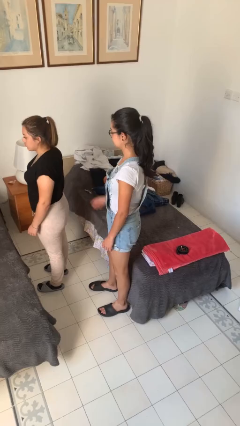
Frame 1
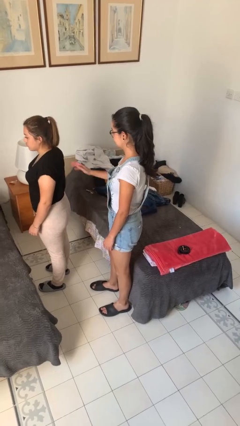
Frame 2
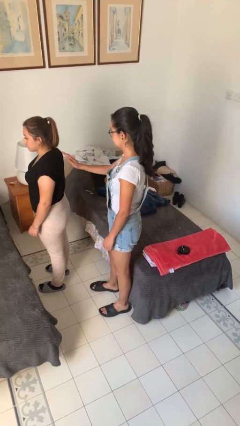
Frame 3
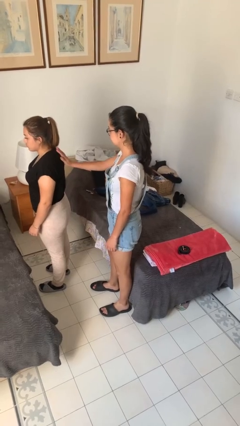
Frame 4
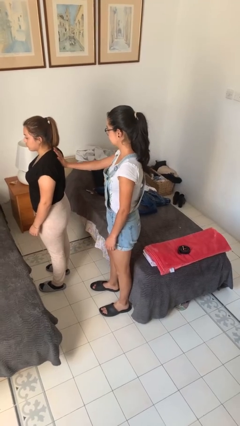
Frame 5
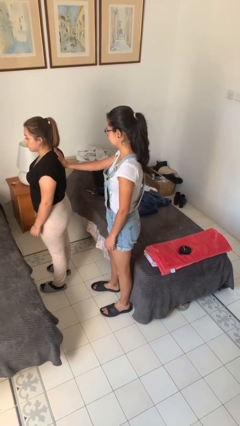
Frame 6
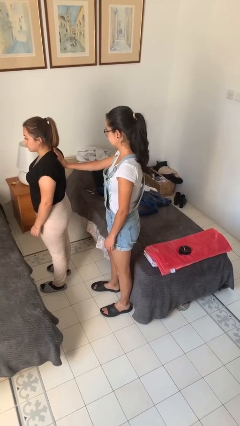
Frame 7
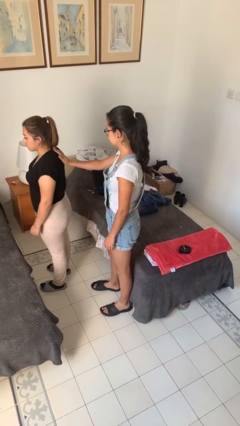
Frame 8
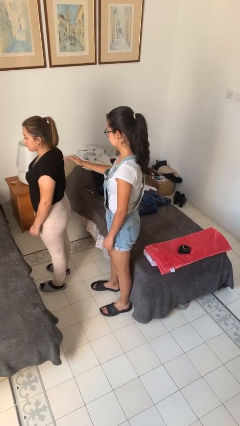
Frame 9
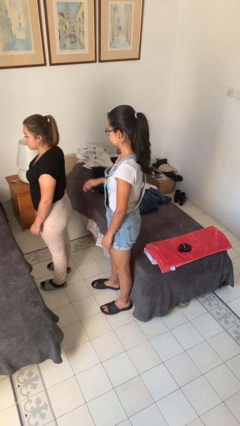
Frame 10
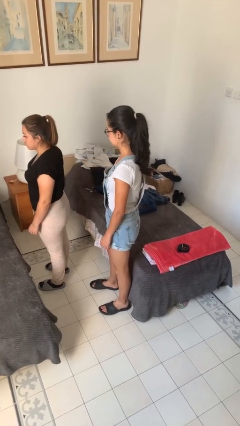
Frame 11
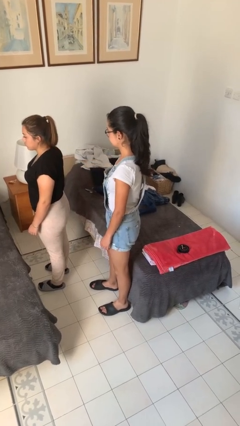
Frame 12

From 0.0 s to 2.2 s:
person touches back of person

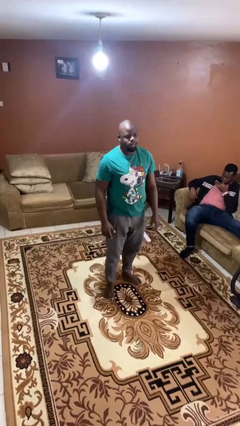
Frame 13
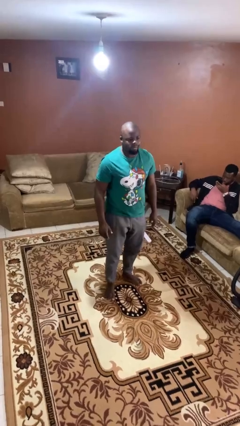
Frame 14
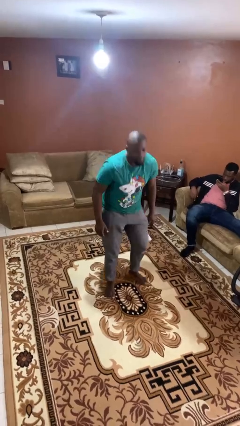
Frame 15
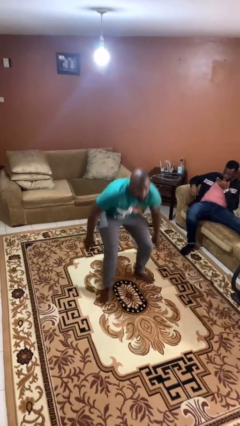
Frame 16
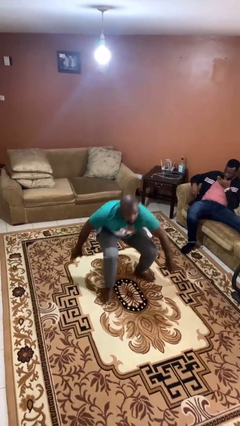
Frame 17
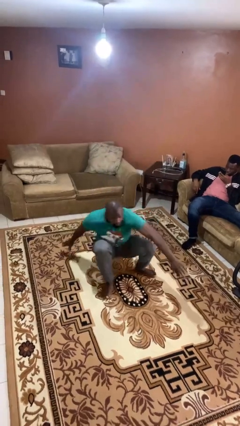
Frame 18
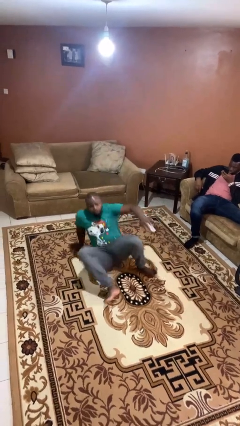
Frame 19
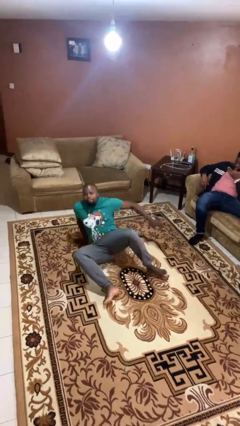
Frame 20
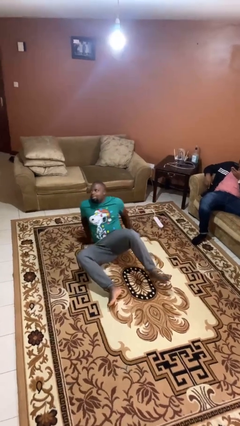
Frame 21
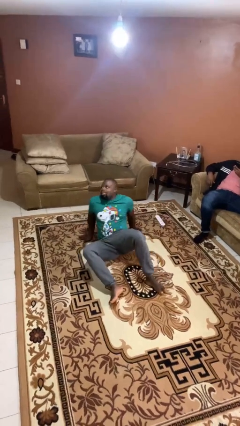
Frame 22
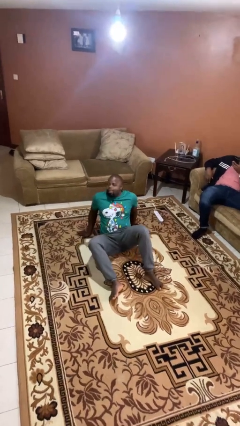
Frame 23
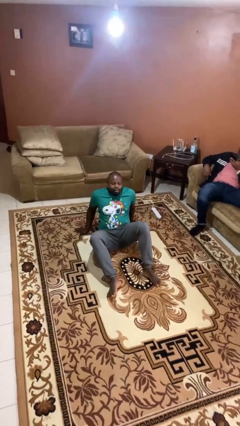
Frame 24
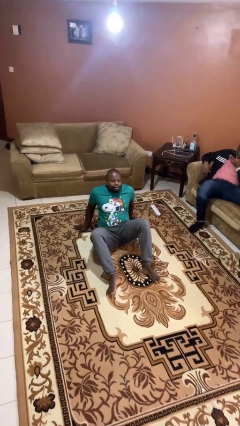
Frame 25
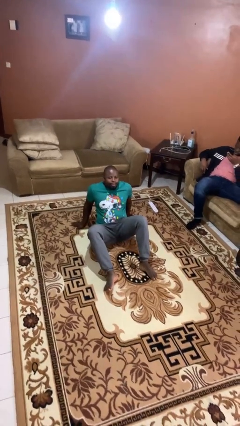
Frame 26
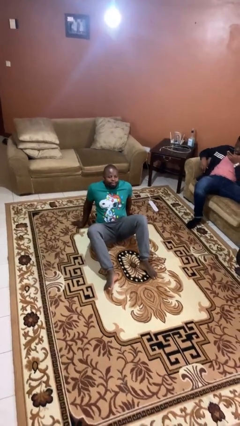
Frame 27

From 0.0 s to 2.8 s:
person sits down

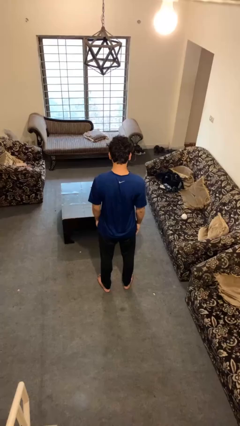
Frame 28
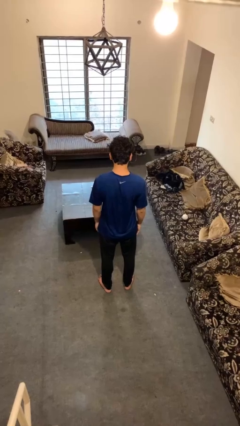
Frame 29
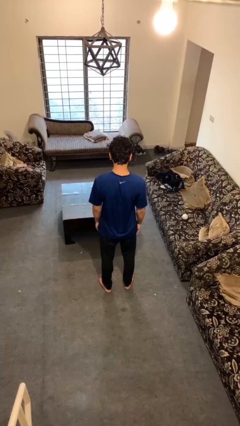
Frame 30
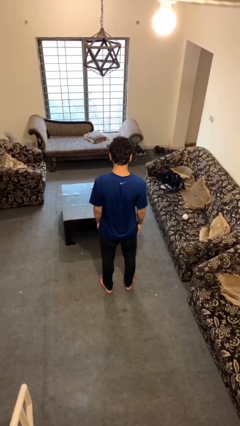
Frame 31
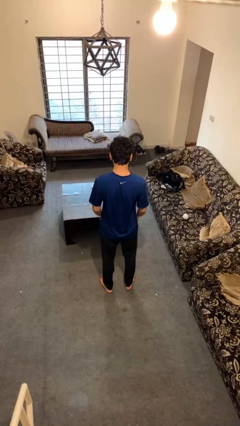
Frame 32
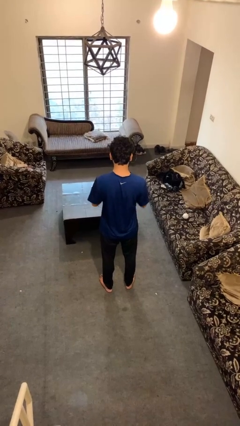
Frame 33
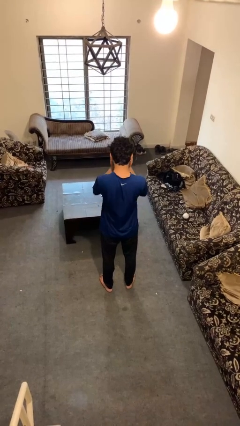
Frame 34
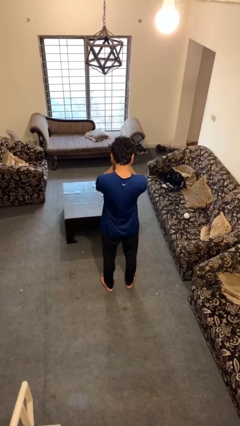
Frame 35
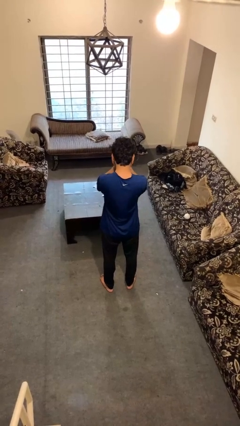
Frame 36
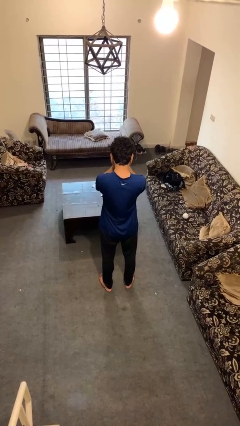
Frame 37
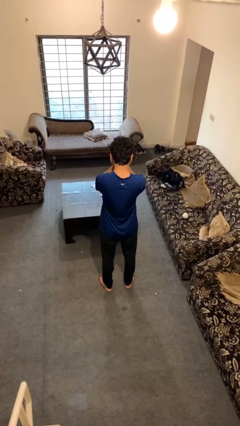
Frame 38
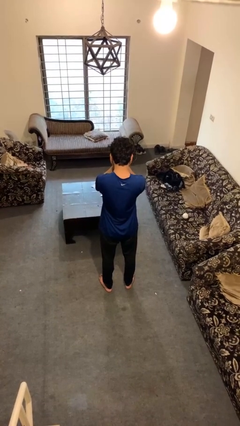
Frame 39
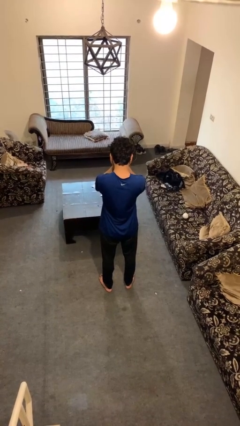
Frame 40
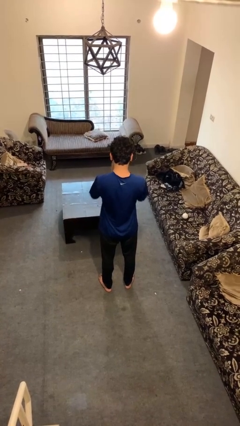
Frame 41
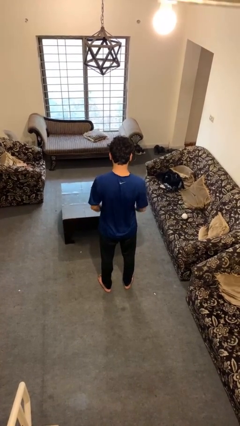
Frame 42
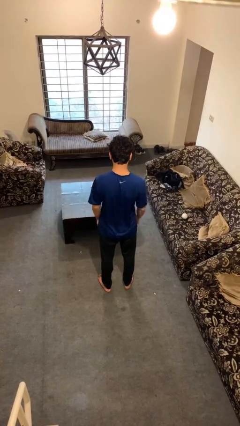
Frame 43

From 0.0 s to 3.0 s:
person covers face with hands

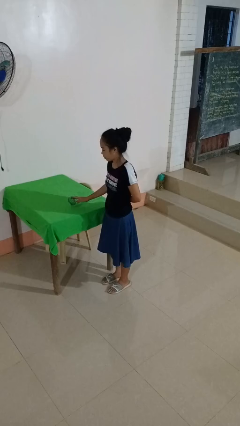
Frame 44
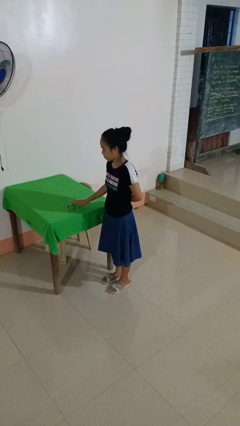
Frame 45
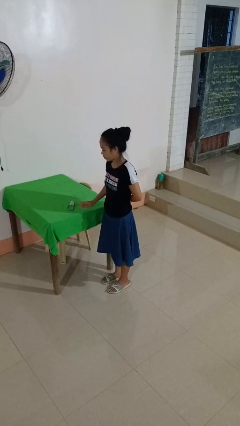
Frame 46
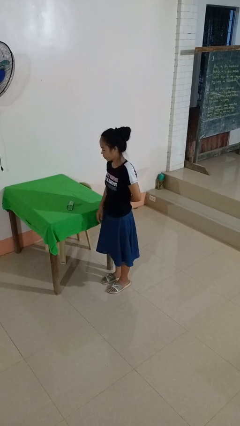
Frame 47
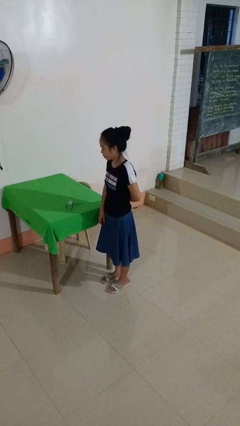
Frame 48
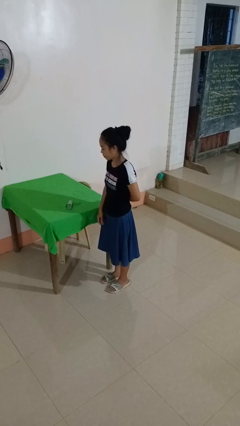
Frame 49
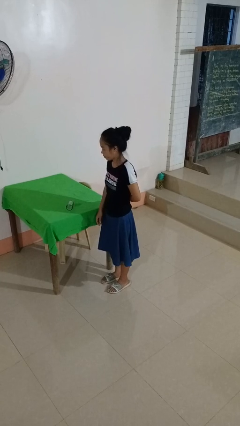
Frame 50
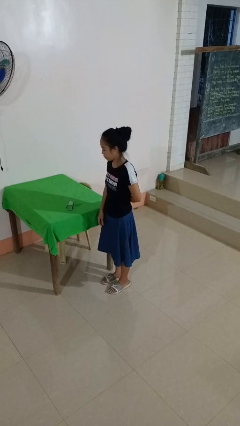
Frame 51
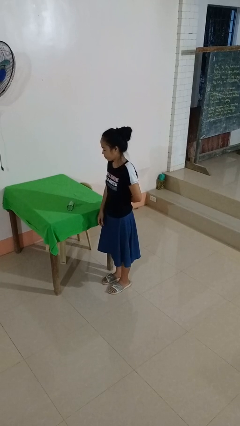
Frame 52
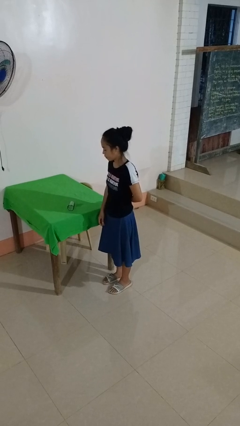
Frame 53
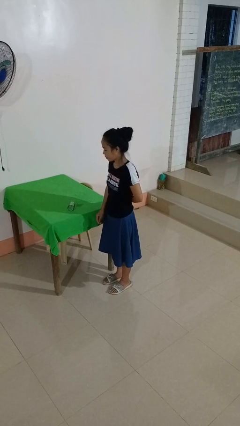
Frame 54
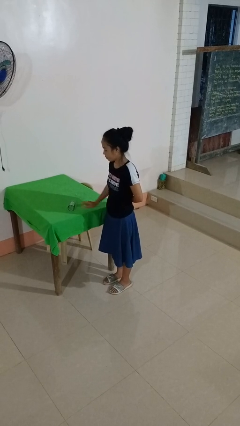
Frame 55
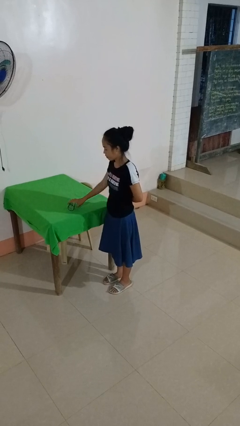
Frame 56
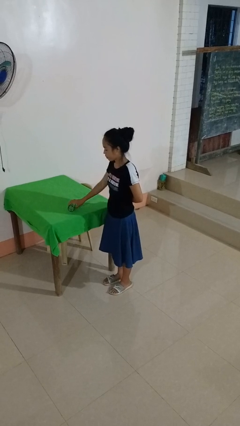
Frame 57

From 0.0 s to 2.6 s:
person knocks over glass

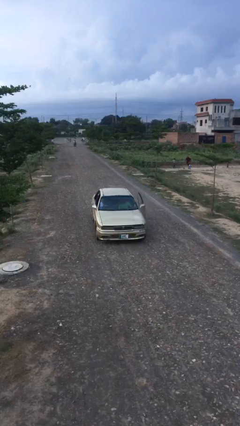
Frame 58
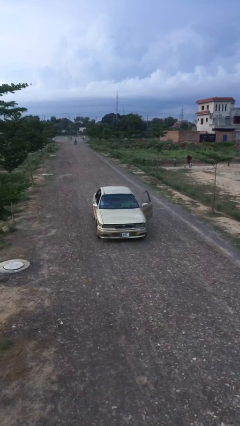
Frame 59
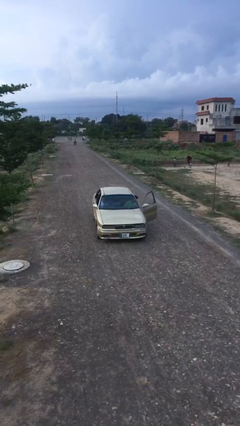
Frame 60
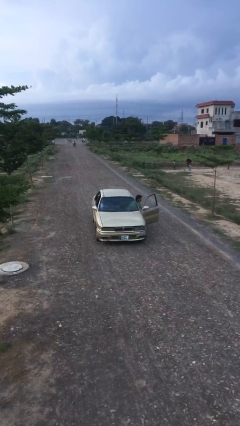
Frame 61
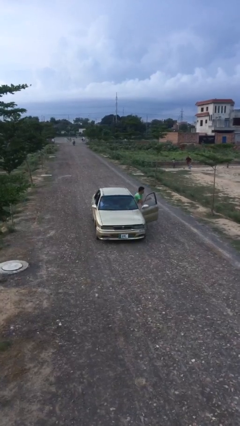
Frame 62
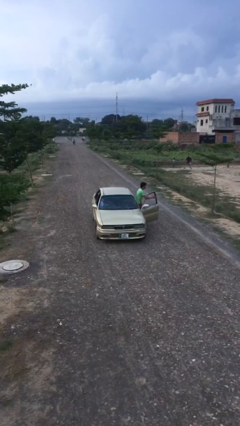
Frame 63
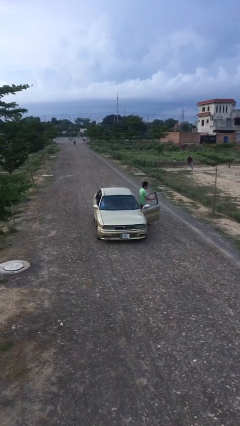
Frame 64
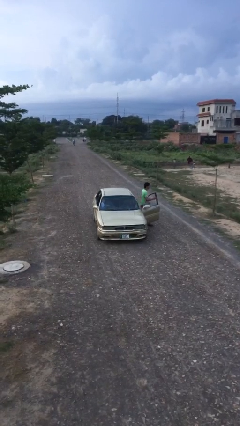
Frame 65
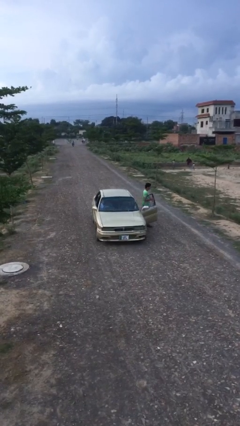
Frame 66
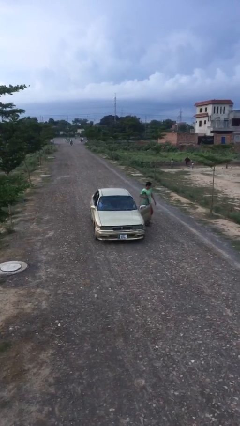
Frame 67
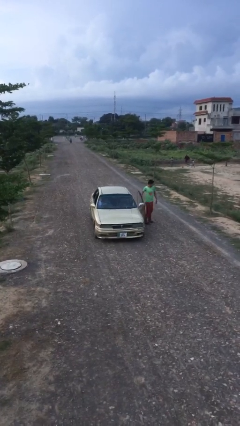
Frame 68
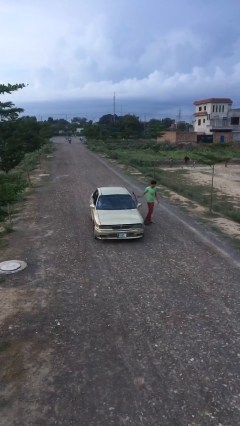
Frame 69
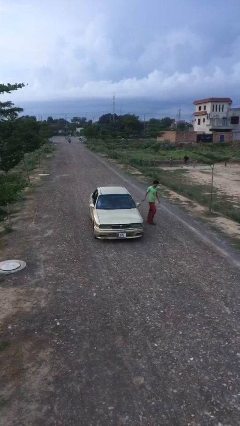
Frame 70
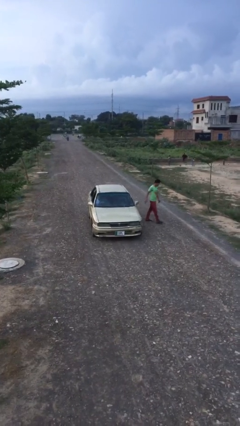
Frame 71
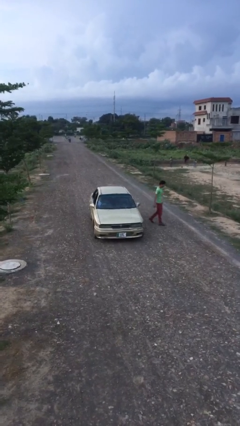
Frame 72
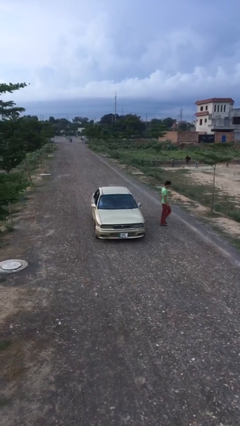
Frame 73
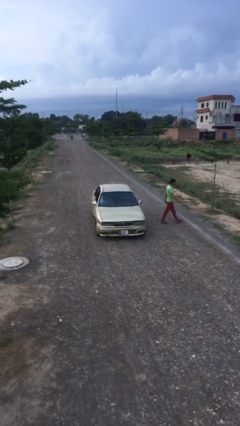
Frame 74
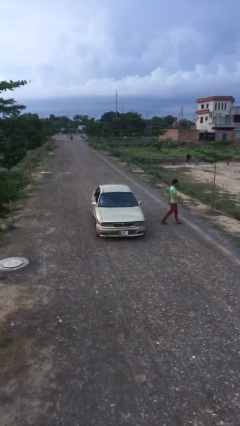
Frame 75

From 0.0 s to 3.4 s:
car drops off person

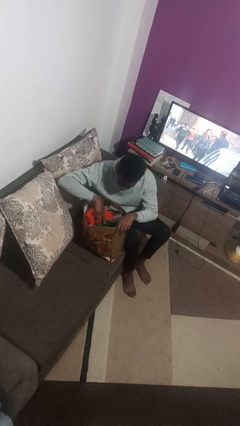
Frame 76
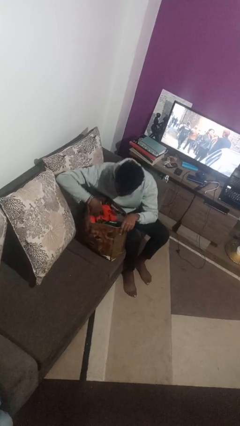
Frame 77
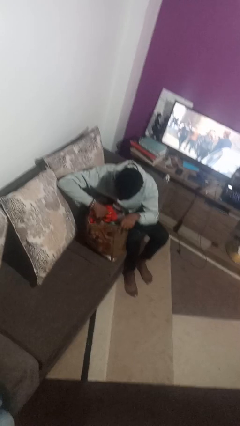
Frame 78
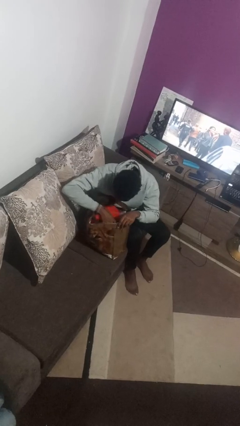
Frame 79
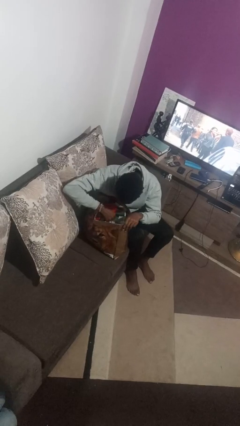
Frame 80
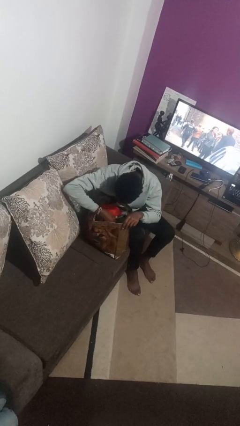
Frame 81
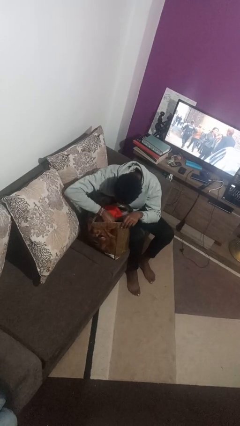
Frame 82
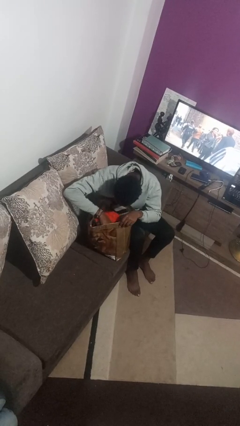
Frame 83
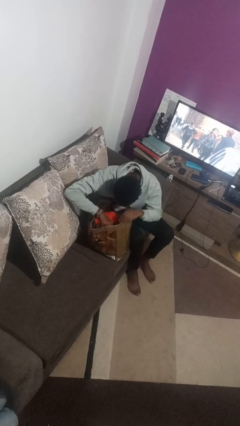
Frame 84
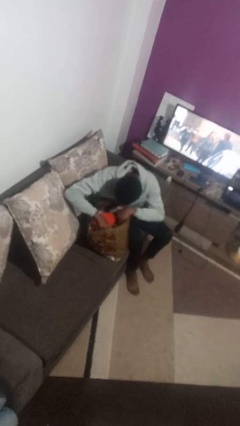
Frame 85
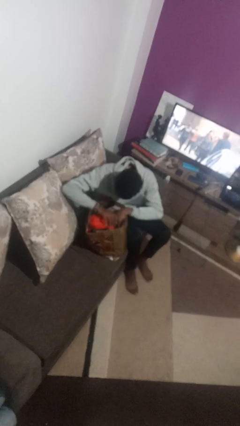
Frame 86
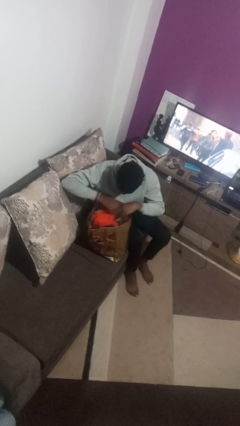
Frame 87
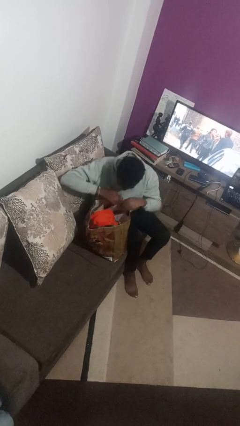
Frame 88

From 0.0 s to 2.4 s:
person searches in bag

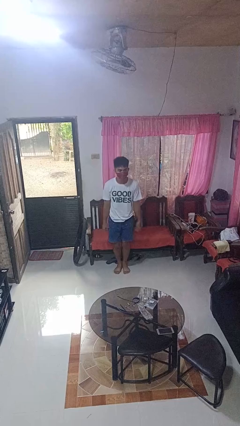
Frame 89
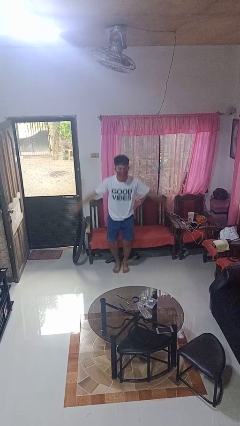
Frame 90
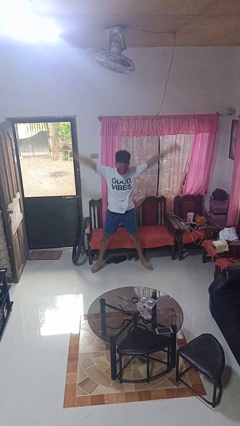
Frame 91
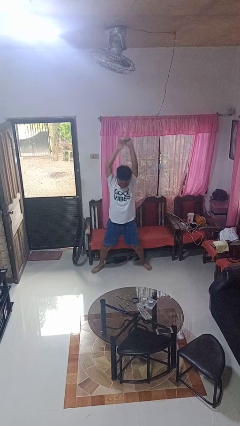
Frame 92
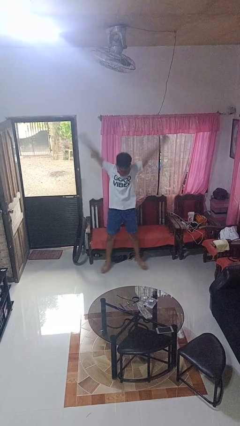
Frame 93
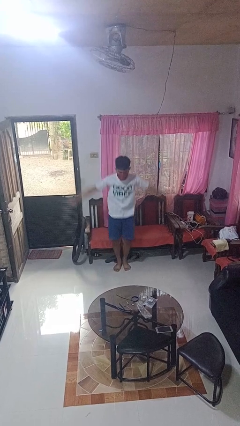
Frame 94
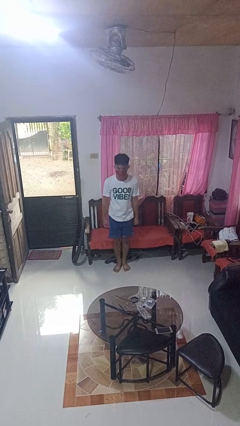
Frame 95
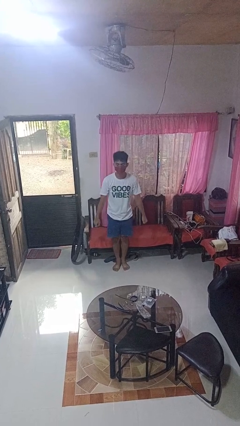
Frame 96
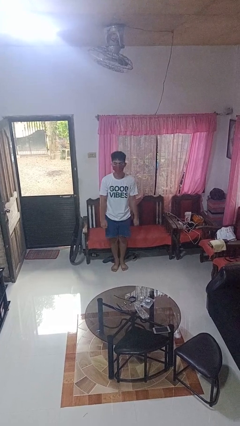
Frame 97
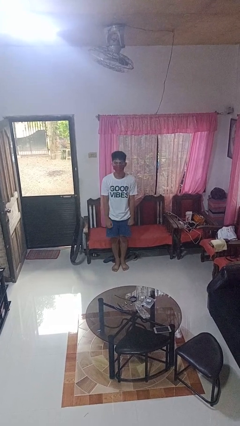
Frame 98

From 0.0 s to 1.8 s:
person exercises with jumping jacks
